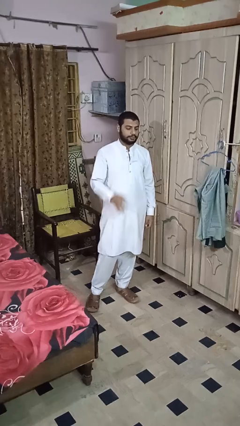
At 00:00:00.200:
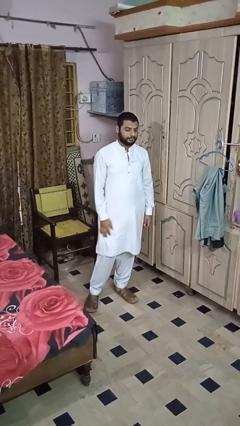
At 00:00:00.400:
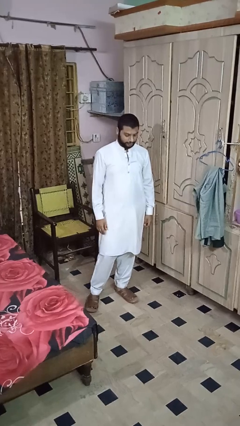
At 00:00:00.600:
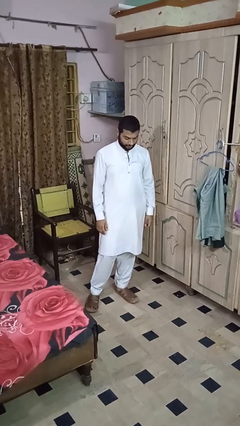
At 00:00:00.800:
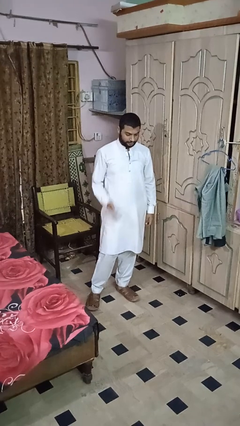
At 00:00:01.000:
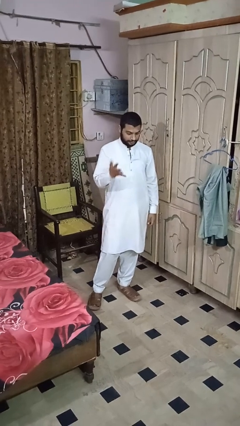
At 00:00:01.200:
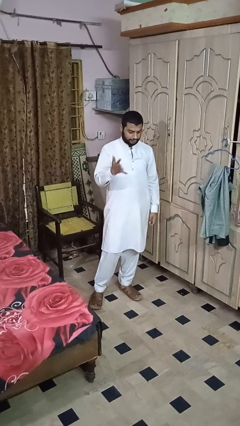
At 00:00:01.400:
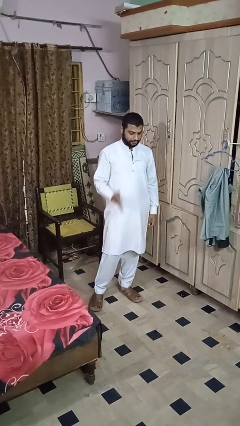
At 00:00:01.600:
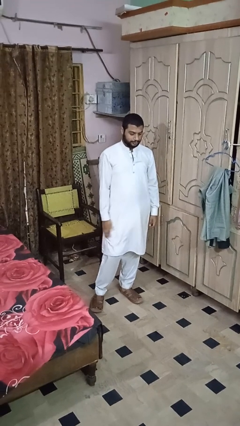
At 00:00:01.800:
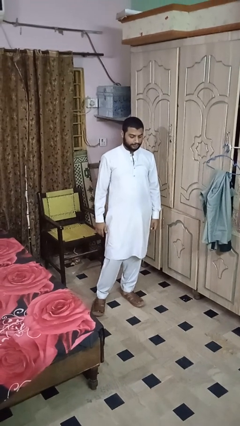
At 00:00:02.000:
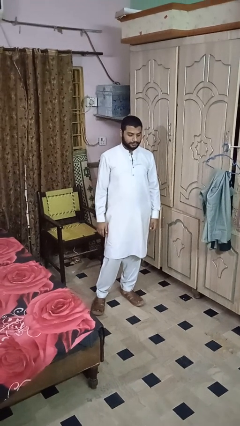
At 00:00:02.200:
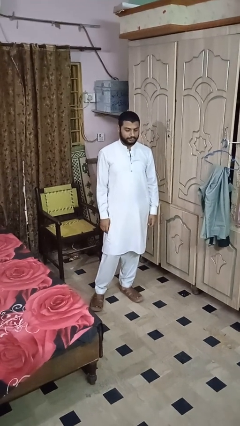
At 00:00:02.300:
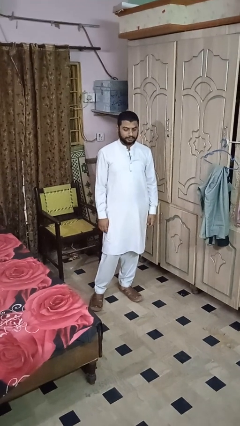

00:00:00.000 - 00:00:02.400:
person shakes head

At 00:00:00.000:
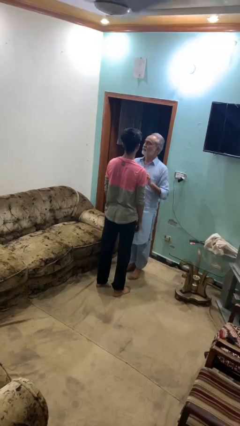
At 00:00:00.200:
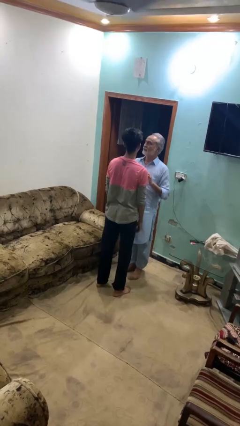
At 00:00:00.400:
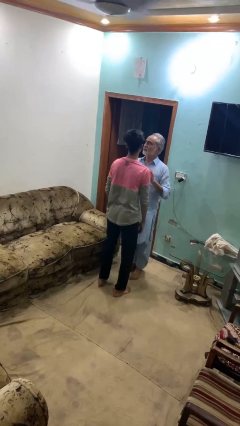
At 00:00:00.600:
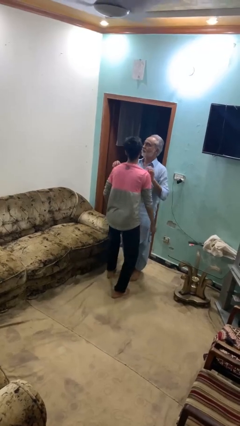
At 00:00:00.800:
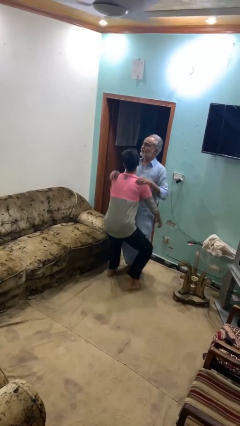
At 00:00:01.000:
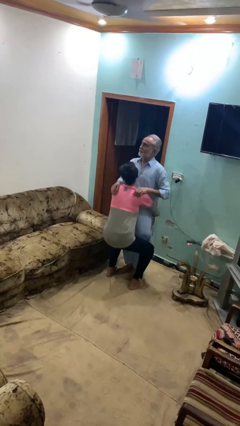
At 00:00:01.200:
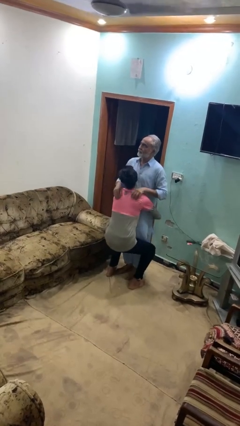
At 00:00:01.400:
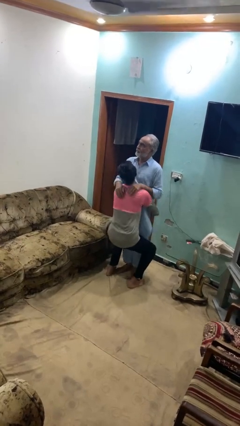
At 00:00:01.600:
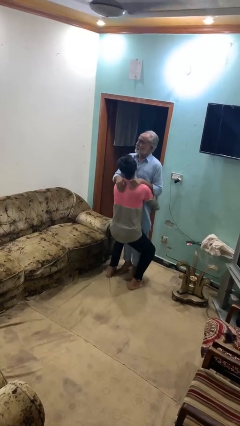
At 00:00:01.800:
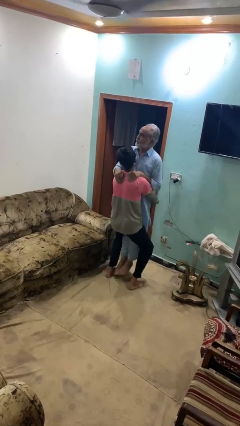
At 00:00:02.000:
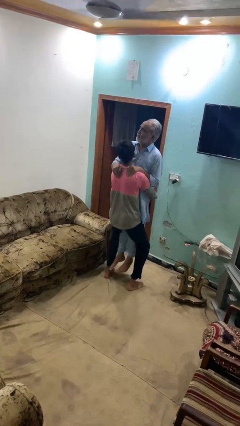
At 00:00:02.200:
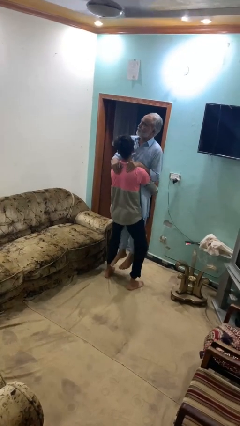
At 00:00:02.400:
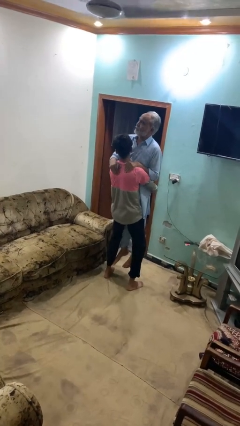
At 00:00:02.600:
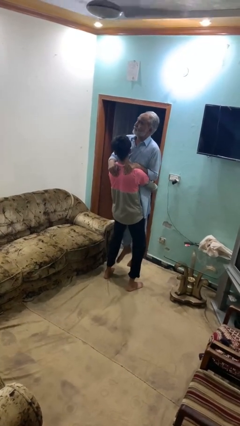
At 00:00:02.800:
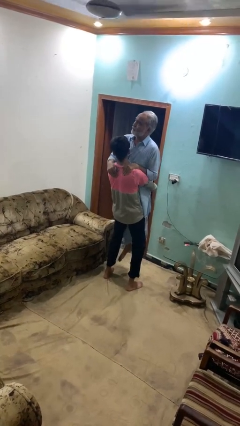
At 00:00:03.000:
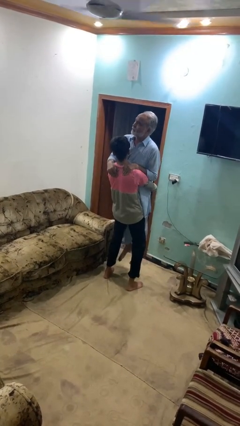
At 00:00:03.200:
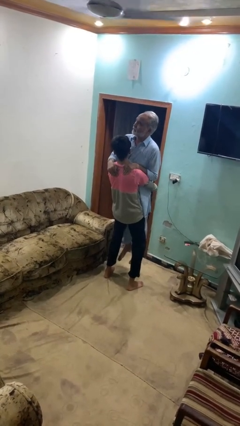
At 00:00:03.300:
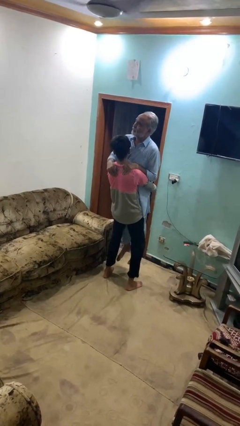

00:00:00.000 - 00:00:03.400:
person picks up person

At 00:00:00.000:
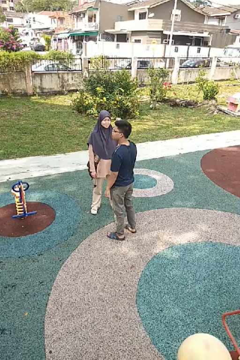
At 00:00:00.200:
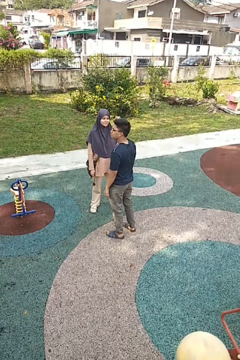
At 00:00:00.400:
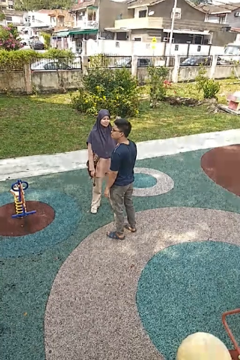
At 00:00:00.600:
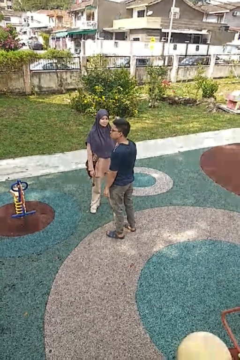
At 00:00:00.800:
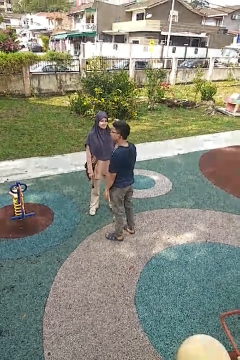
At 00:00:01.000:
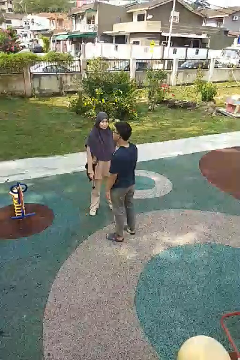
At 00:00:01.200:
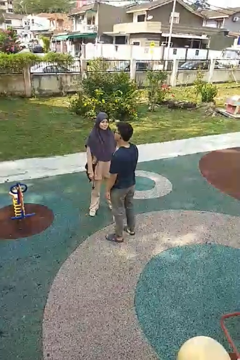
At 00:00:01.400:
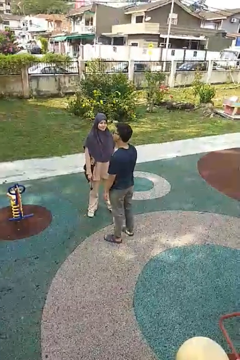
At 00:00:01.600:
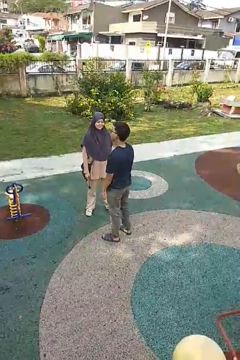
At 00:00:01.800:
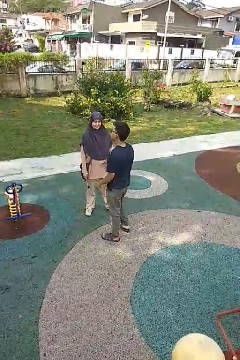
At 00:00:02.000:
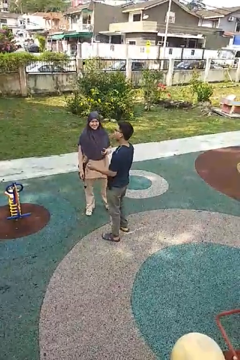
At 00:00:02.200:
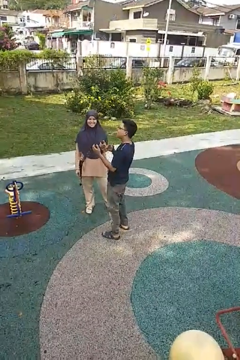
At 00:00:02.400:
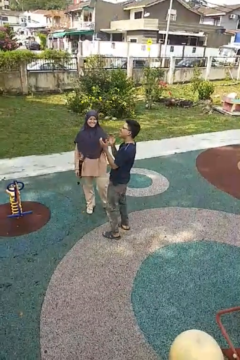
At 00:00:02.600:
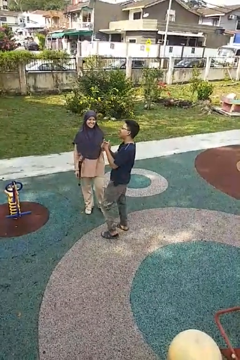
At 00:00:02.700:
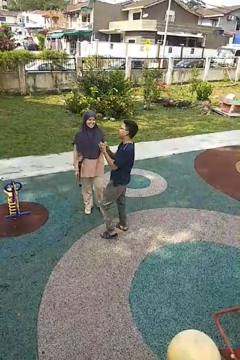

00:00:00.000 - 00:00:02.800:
person laughs with person

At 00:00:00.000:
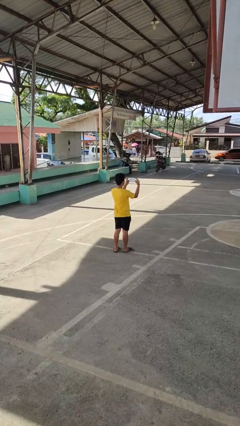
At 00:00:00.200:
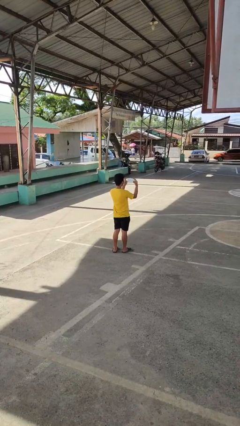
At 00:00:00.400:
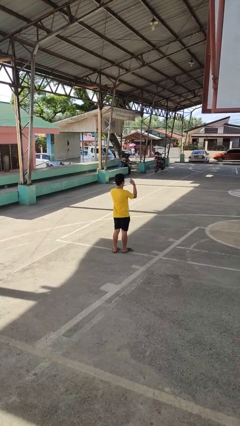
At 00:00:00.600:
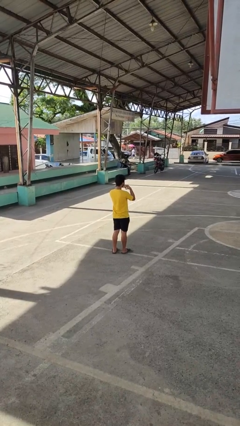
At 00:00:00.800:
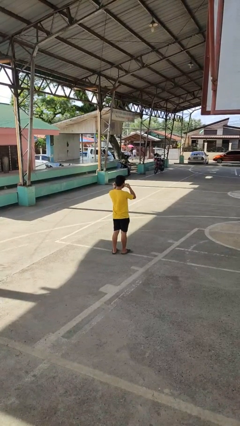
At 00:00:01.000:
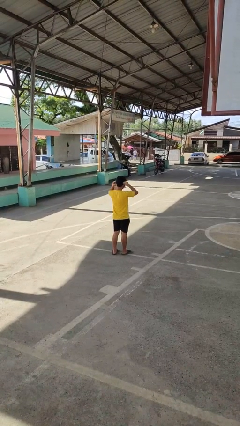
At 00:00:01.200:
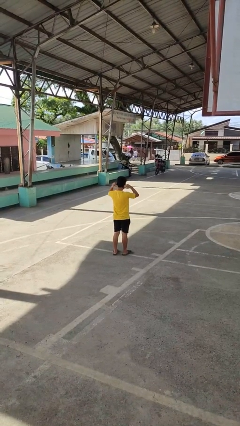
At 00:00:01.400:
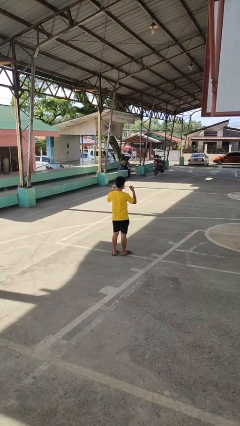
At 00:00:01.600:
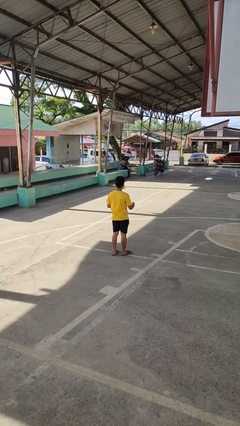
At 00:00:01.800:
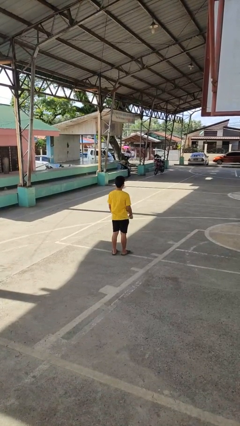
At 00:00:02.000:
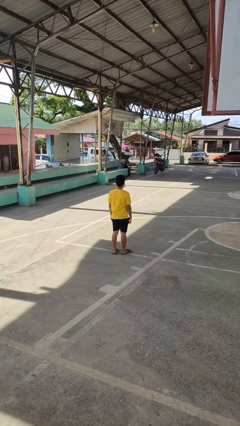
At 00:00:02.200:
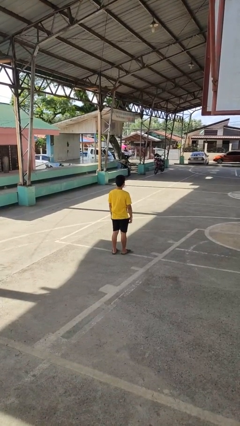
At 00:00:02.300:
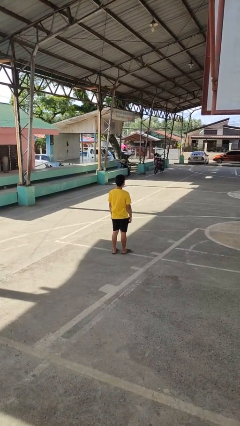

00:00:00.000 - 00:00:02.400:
person puts on facemask

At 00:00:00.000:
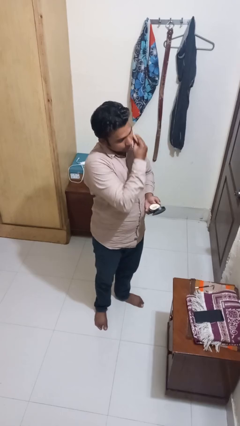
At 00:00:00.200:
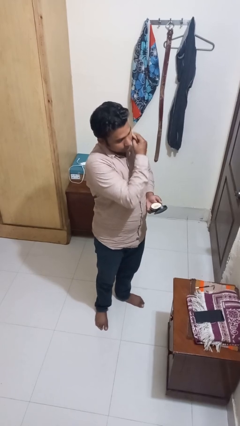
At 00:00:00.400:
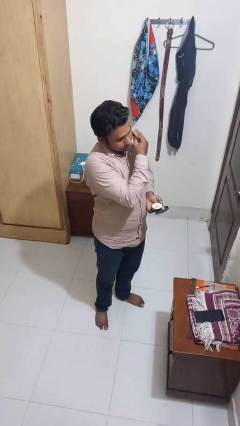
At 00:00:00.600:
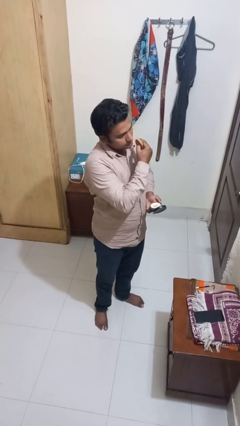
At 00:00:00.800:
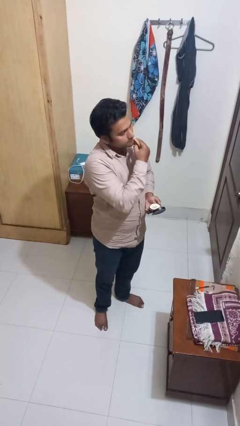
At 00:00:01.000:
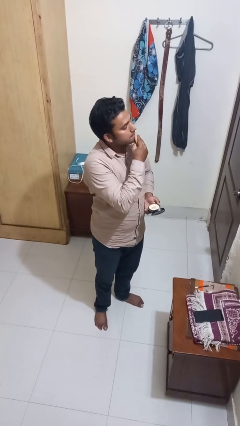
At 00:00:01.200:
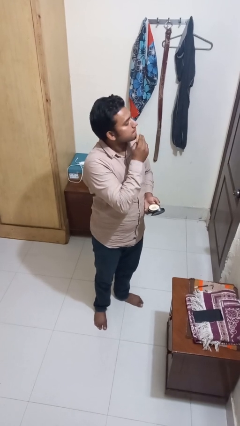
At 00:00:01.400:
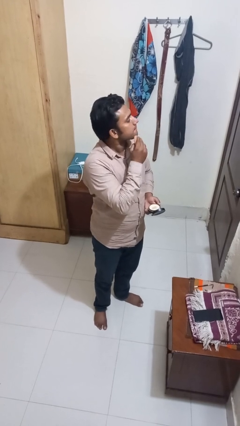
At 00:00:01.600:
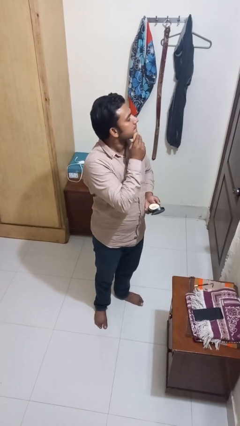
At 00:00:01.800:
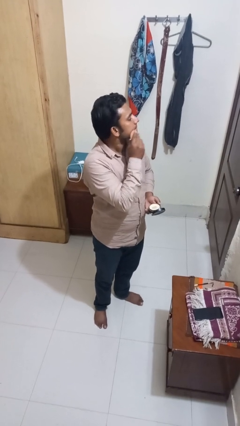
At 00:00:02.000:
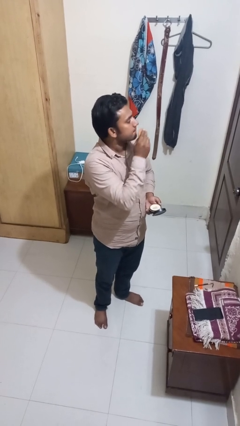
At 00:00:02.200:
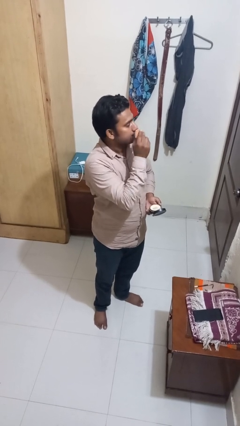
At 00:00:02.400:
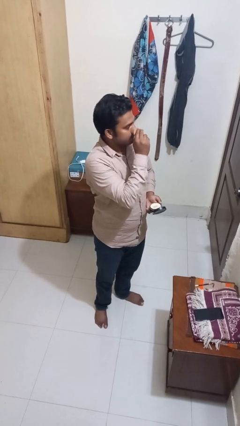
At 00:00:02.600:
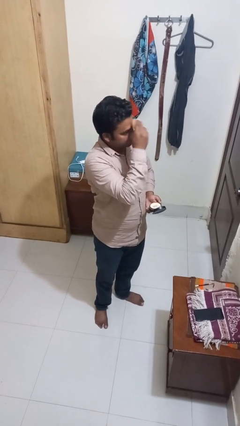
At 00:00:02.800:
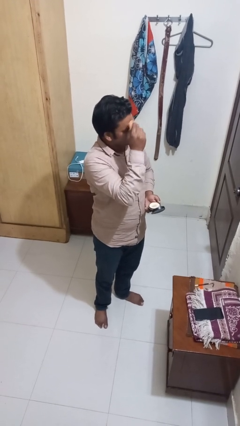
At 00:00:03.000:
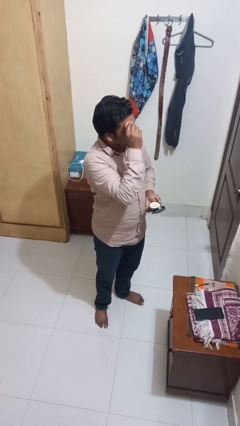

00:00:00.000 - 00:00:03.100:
person applies foundation makeup

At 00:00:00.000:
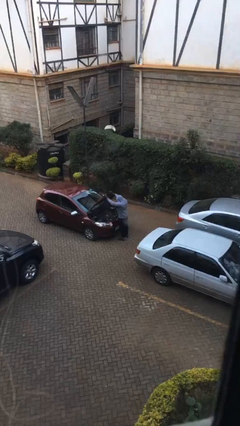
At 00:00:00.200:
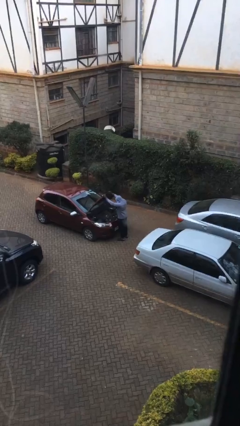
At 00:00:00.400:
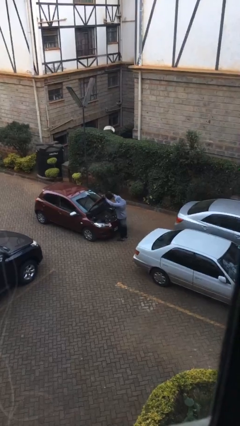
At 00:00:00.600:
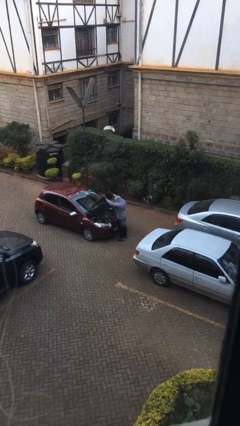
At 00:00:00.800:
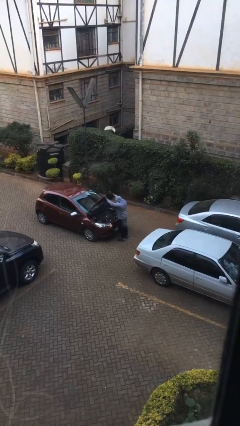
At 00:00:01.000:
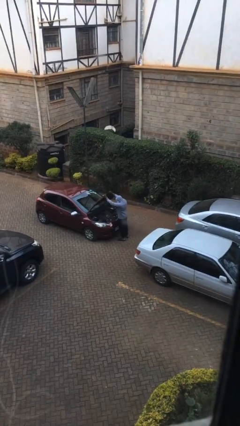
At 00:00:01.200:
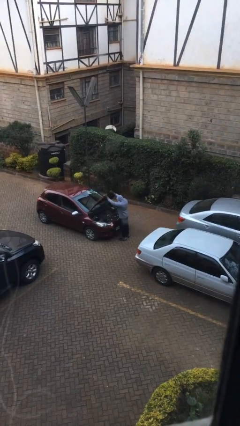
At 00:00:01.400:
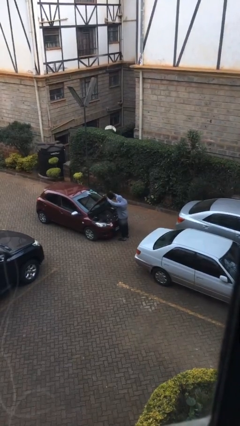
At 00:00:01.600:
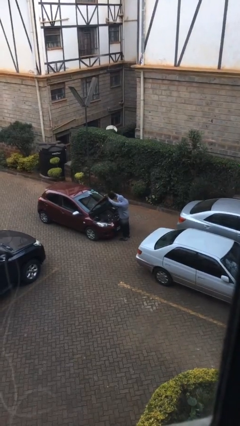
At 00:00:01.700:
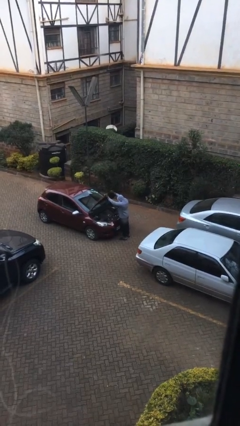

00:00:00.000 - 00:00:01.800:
person opens car hood

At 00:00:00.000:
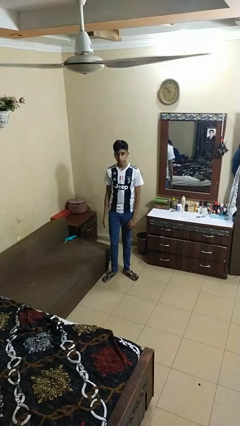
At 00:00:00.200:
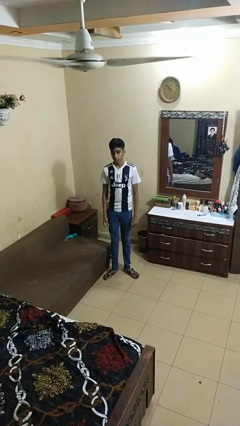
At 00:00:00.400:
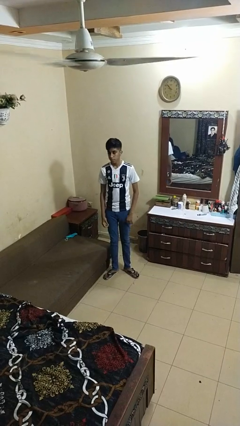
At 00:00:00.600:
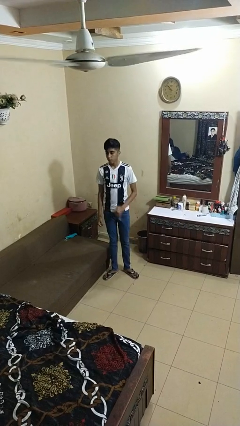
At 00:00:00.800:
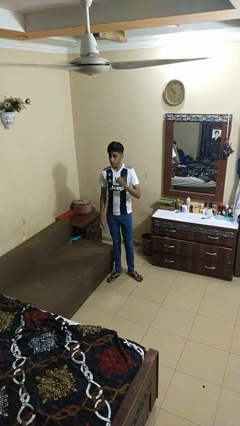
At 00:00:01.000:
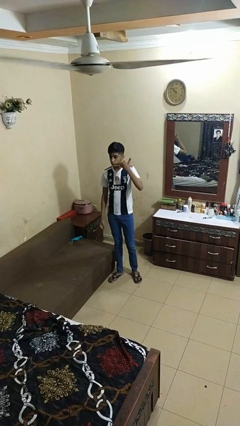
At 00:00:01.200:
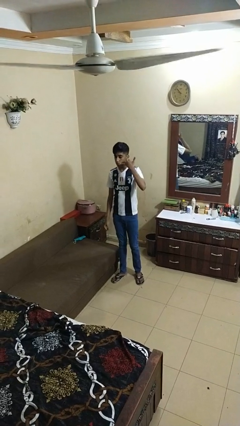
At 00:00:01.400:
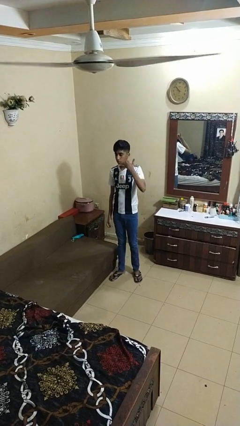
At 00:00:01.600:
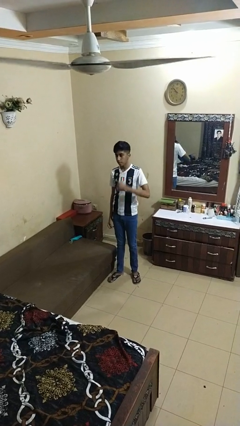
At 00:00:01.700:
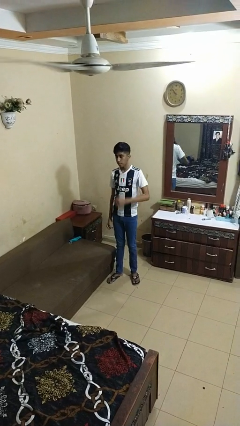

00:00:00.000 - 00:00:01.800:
person gestures call me
